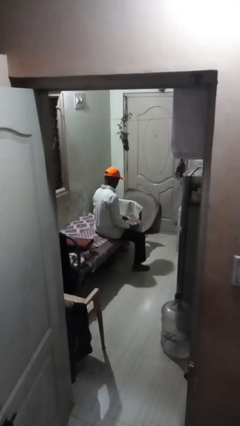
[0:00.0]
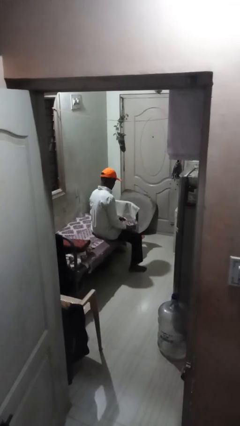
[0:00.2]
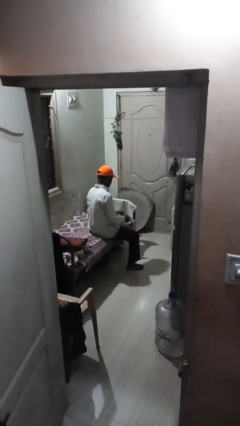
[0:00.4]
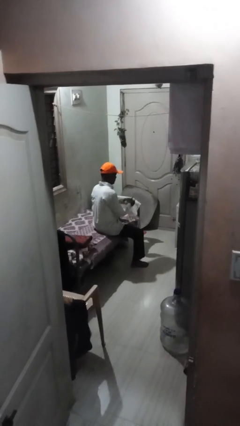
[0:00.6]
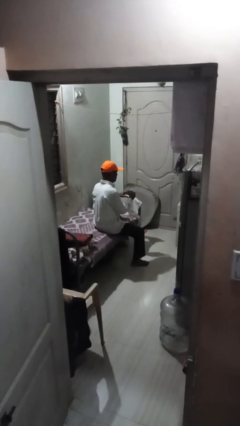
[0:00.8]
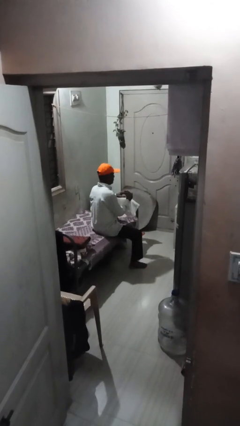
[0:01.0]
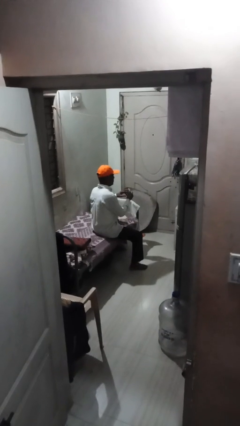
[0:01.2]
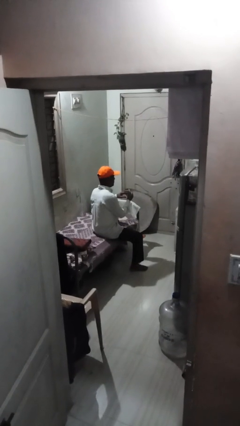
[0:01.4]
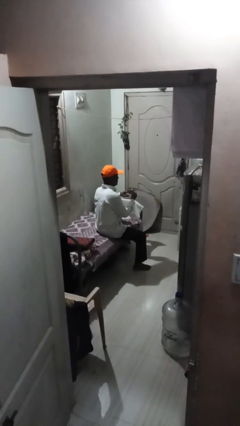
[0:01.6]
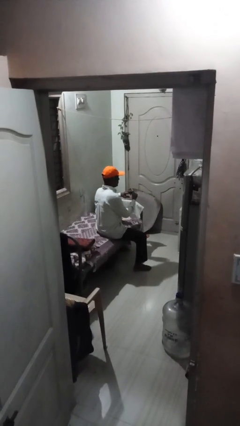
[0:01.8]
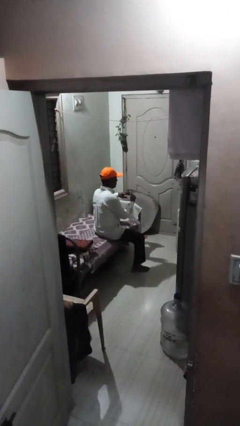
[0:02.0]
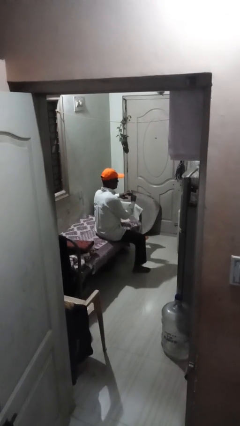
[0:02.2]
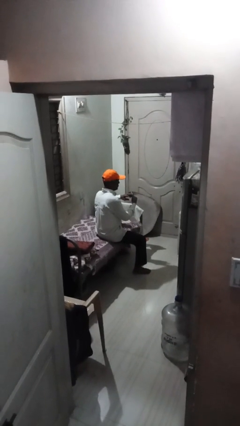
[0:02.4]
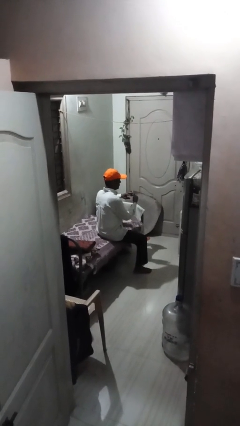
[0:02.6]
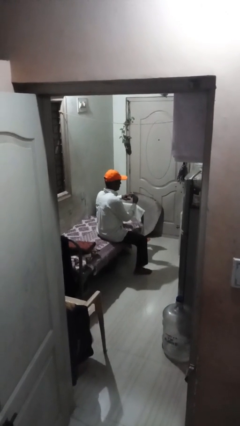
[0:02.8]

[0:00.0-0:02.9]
person files fingernails

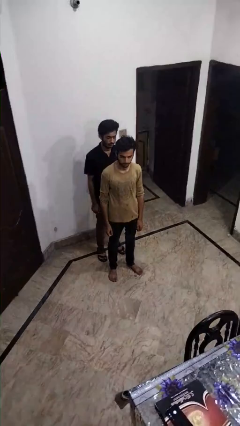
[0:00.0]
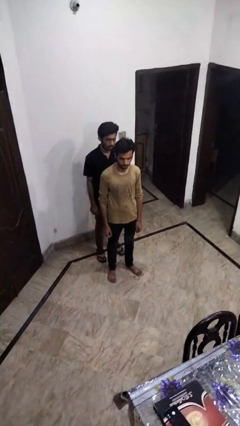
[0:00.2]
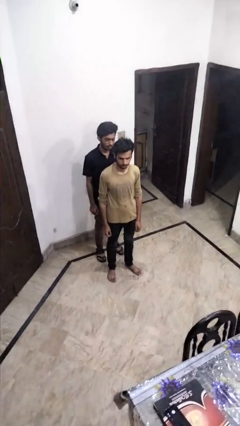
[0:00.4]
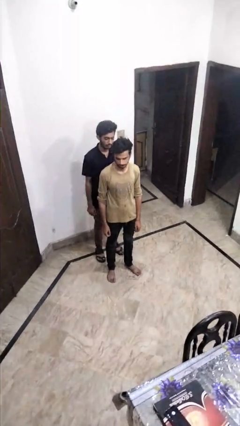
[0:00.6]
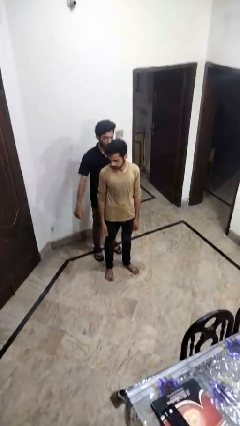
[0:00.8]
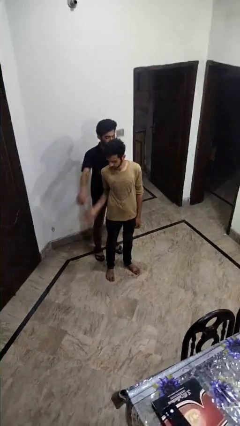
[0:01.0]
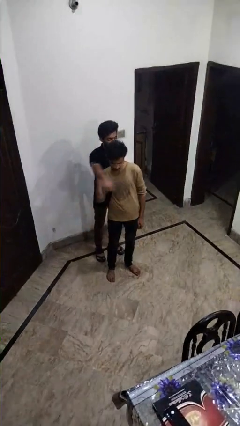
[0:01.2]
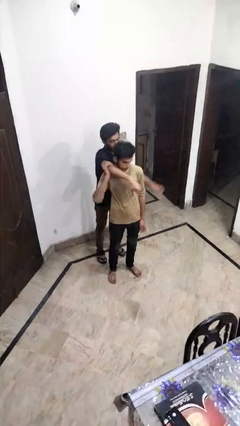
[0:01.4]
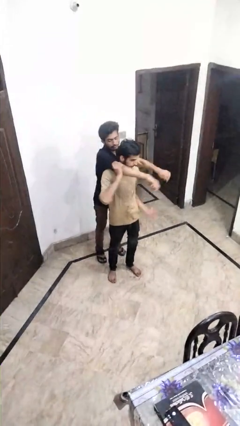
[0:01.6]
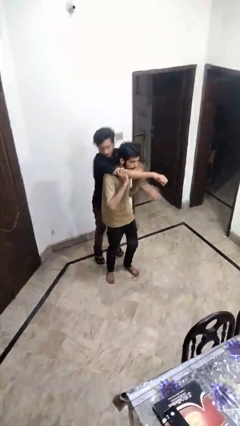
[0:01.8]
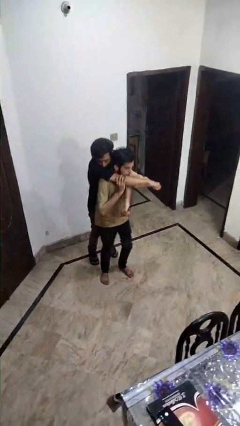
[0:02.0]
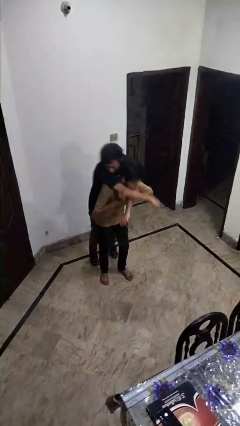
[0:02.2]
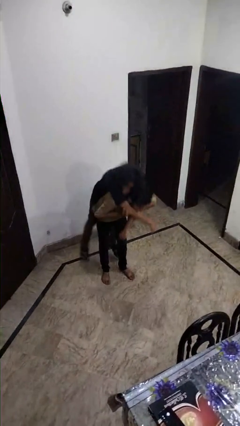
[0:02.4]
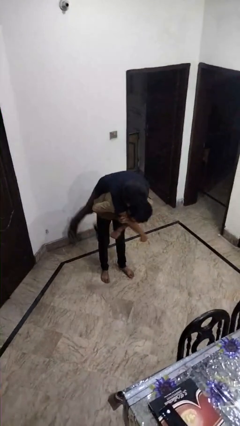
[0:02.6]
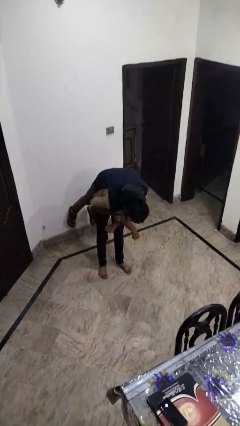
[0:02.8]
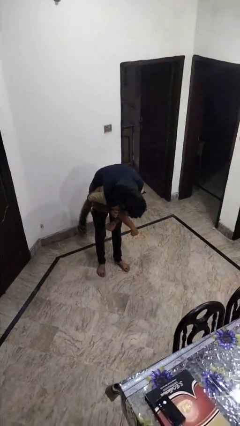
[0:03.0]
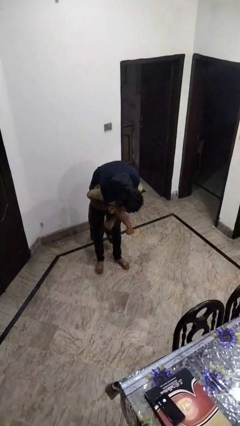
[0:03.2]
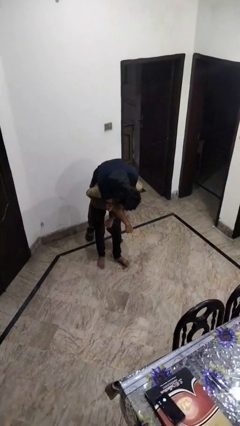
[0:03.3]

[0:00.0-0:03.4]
person carries person over shoulder

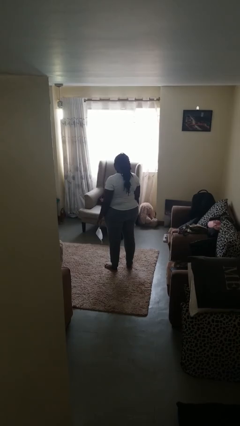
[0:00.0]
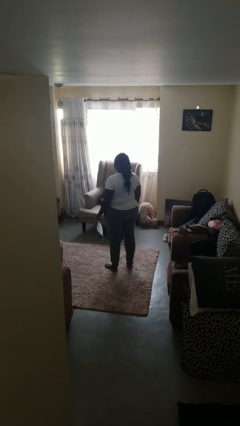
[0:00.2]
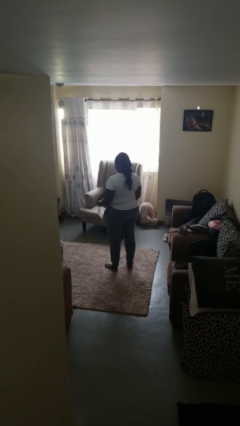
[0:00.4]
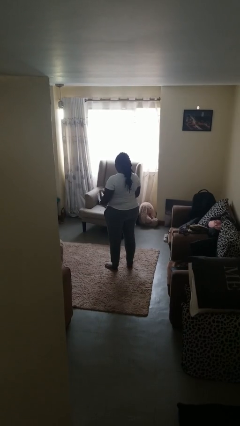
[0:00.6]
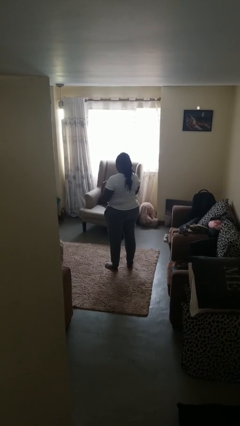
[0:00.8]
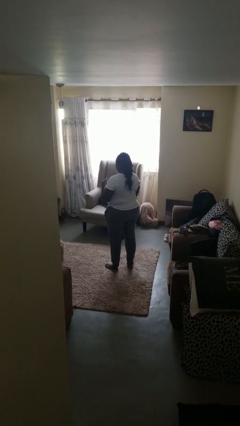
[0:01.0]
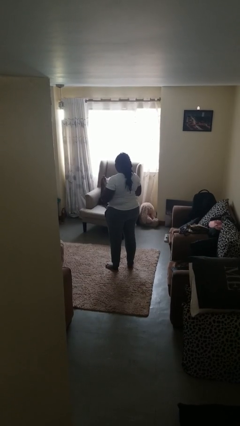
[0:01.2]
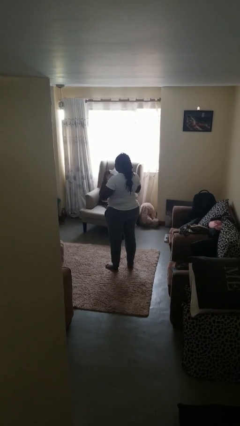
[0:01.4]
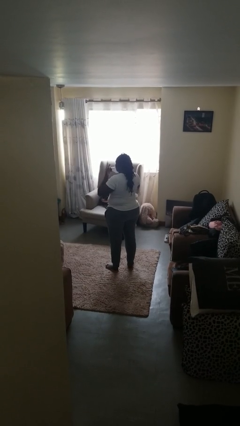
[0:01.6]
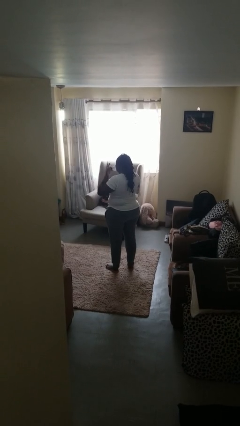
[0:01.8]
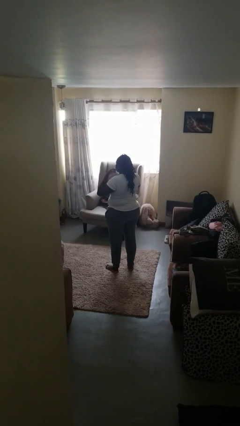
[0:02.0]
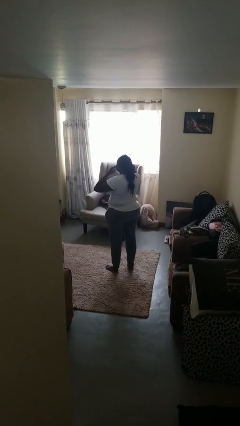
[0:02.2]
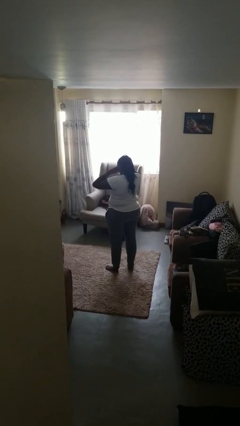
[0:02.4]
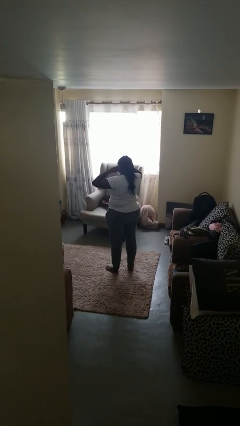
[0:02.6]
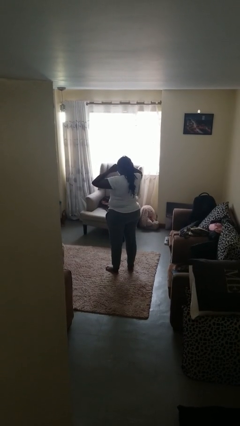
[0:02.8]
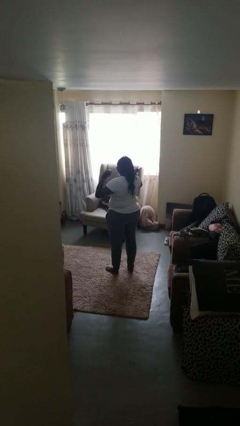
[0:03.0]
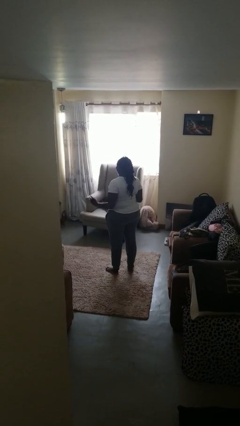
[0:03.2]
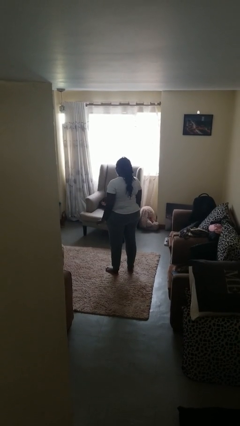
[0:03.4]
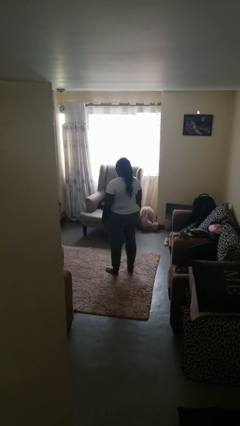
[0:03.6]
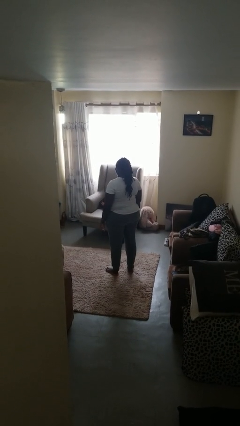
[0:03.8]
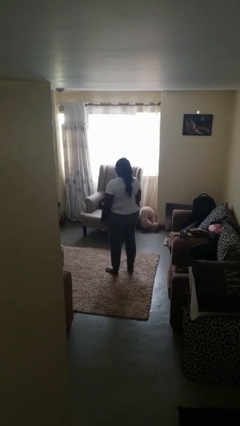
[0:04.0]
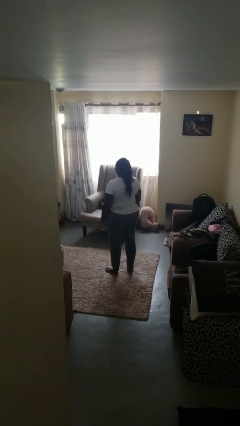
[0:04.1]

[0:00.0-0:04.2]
person puts on facemask

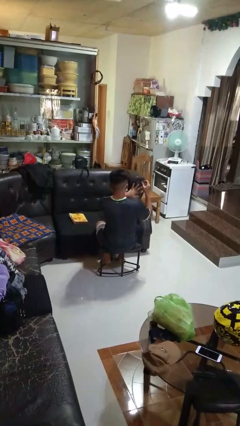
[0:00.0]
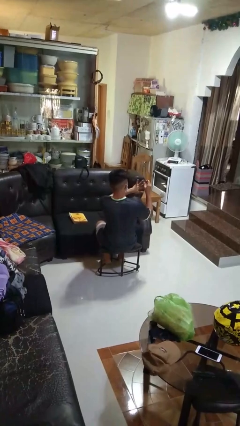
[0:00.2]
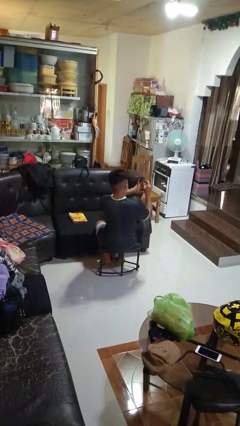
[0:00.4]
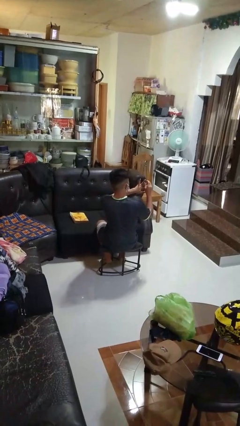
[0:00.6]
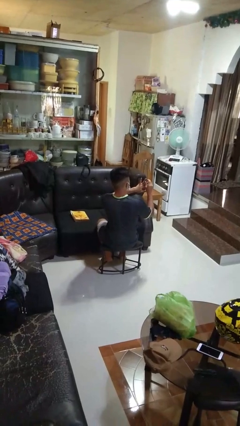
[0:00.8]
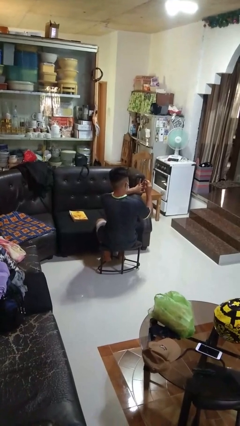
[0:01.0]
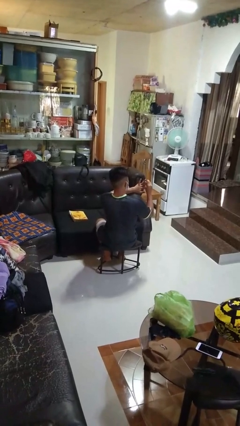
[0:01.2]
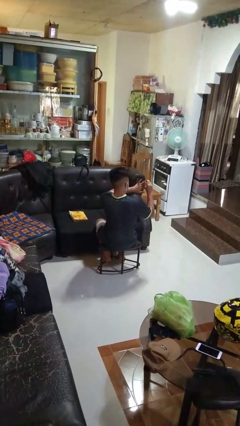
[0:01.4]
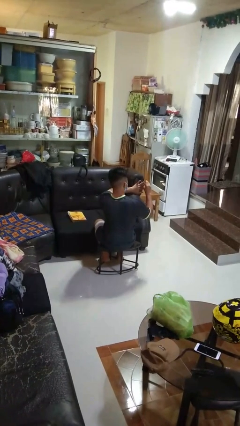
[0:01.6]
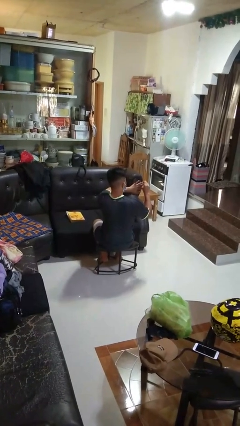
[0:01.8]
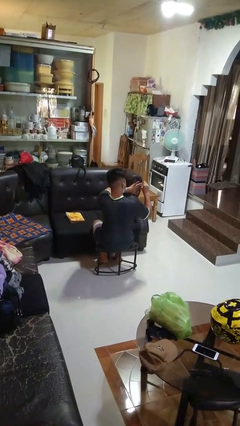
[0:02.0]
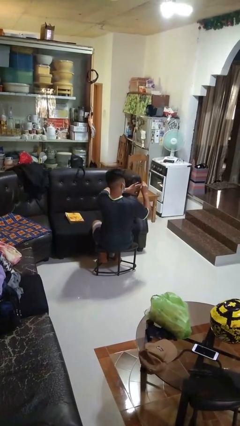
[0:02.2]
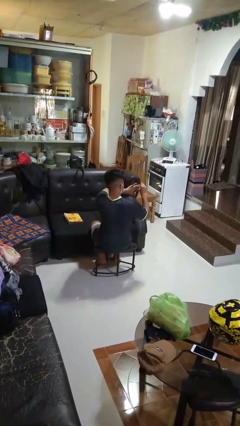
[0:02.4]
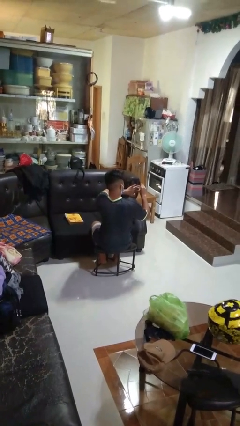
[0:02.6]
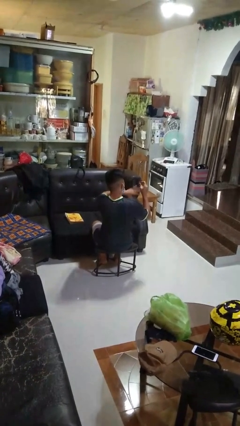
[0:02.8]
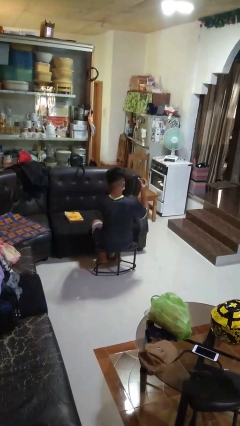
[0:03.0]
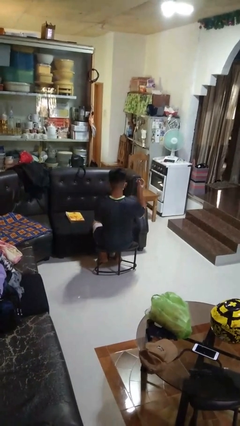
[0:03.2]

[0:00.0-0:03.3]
person clips fingernails

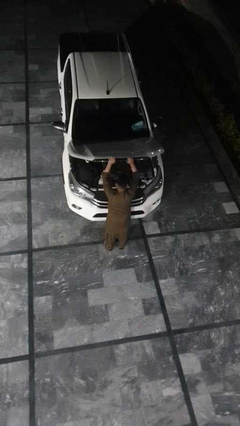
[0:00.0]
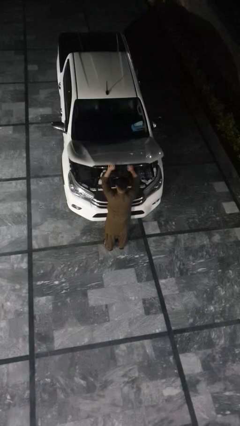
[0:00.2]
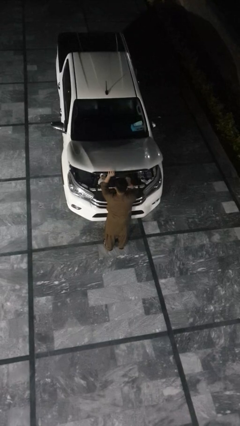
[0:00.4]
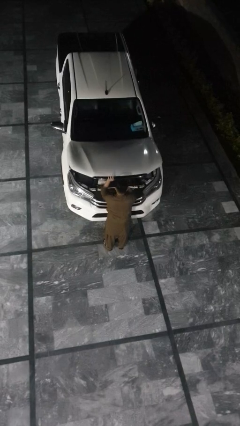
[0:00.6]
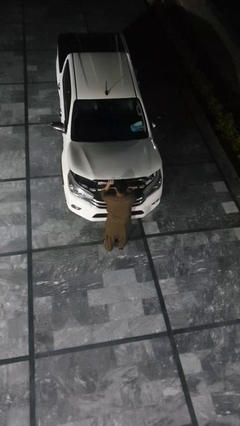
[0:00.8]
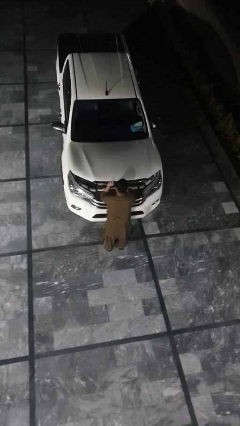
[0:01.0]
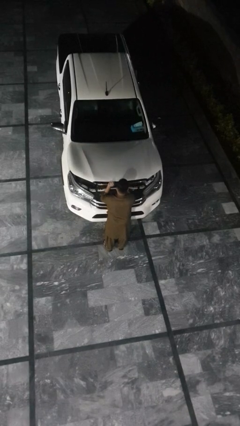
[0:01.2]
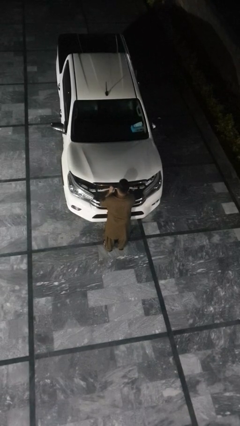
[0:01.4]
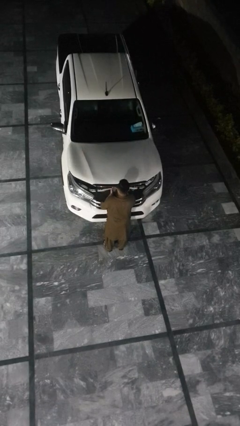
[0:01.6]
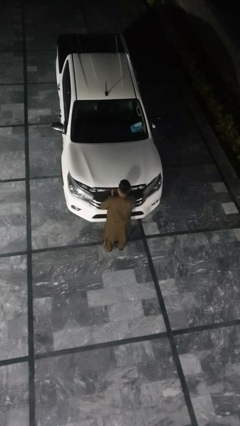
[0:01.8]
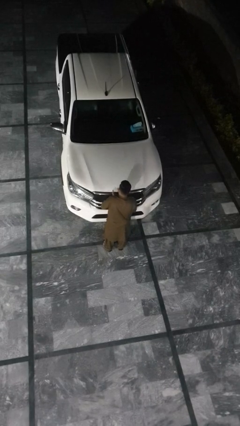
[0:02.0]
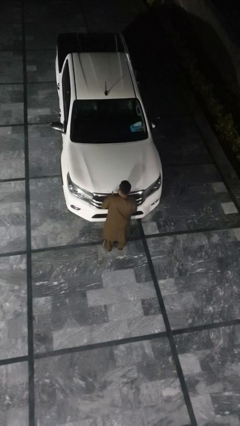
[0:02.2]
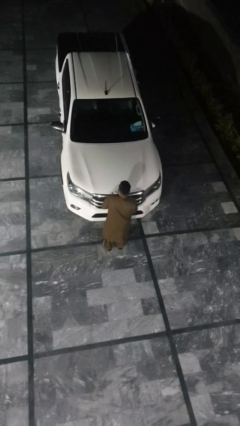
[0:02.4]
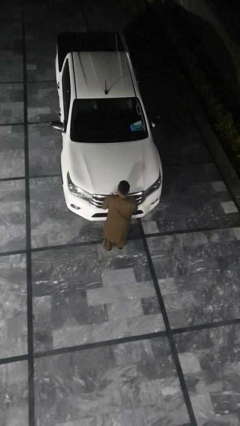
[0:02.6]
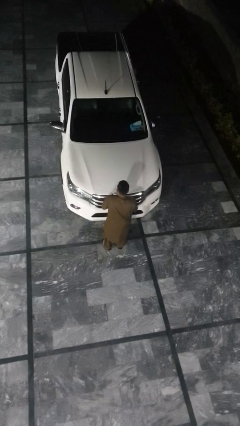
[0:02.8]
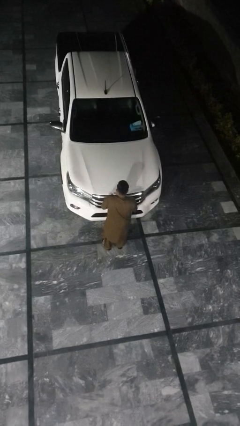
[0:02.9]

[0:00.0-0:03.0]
person closes car hood

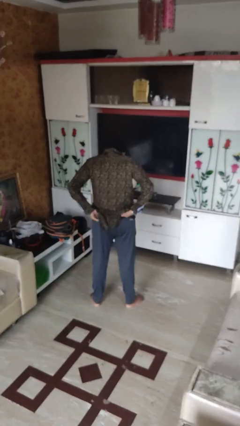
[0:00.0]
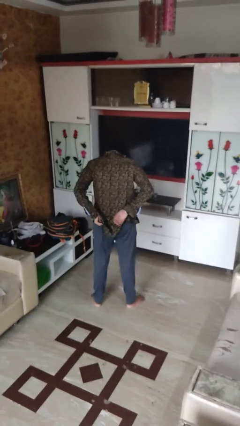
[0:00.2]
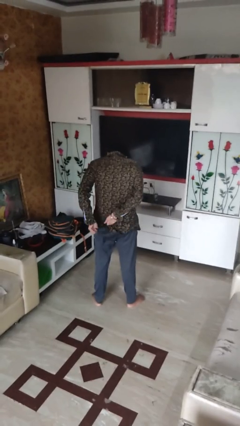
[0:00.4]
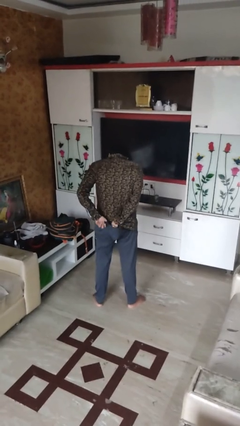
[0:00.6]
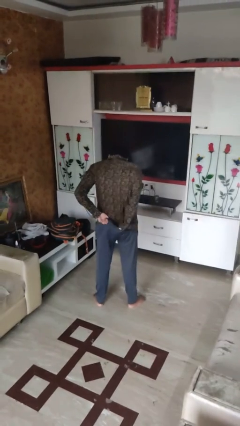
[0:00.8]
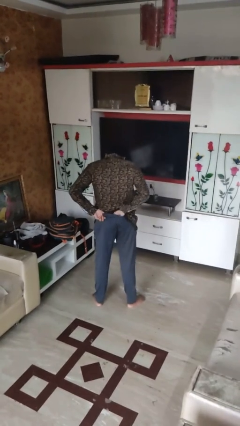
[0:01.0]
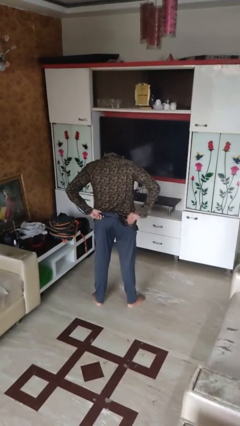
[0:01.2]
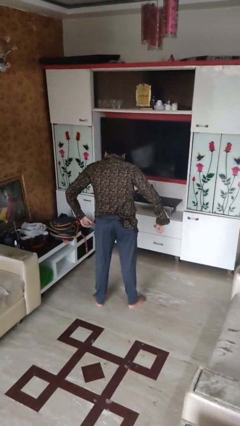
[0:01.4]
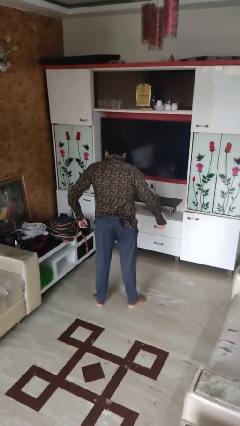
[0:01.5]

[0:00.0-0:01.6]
person tucks in shirt
